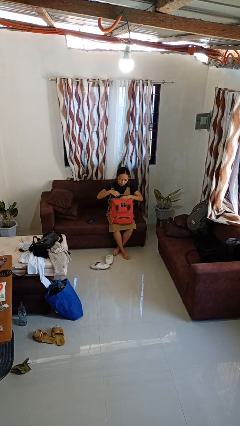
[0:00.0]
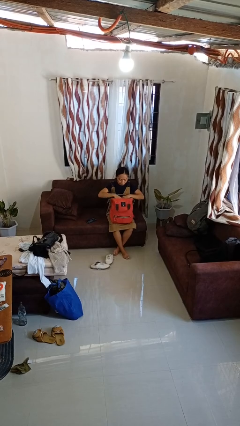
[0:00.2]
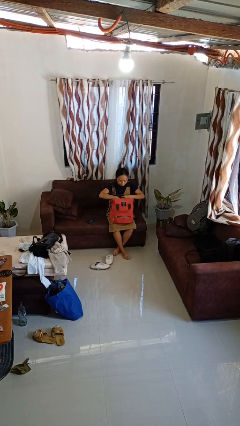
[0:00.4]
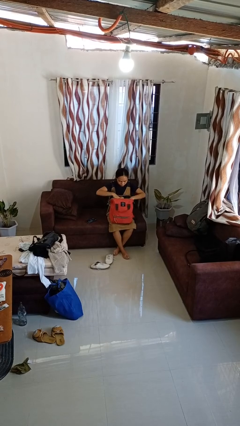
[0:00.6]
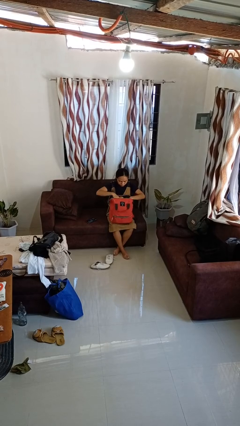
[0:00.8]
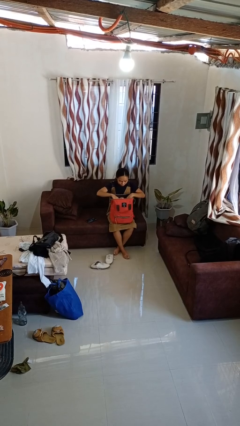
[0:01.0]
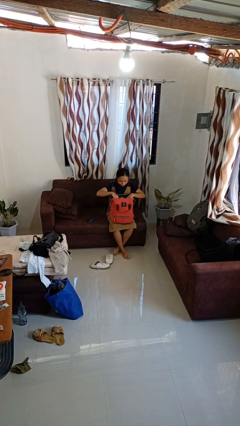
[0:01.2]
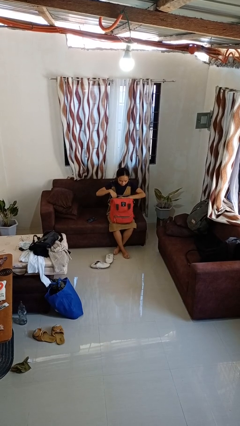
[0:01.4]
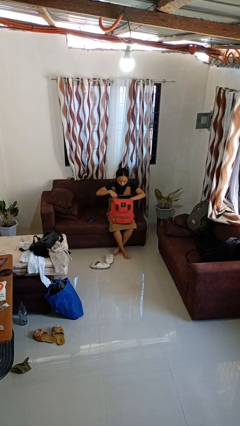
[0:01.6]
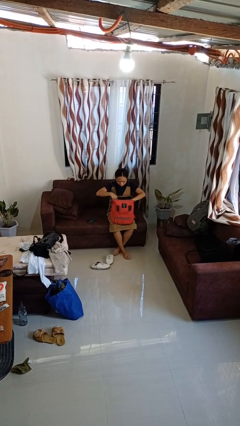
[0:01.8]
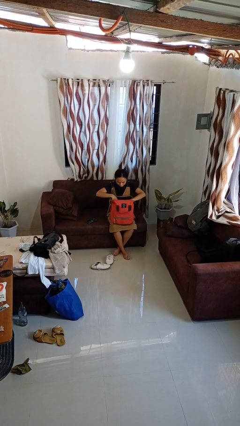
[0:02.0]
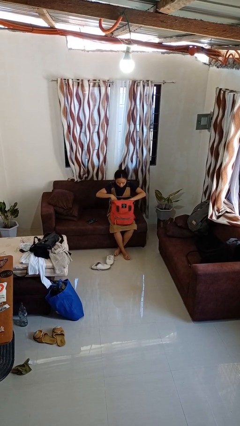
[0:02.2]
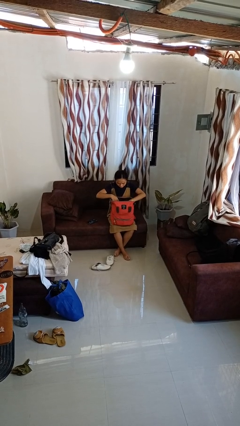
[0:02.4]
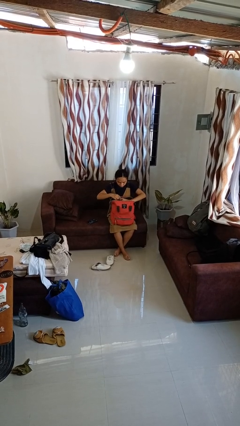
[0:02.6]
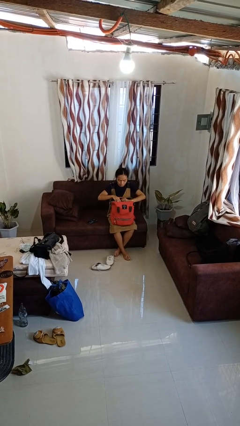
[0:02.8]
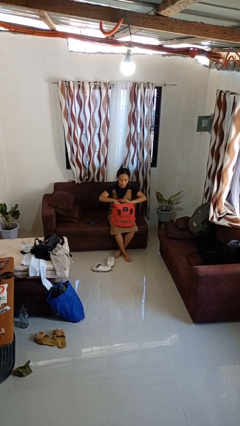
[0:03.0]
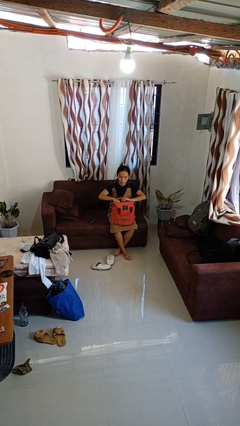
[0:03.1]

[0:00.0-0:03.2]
person searches in backpack

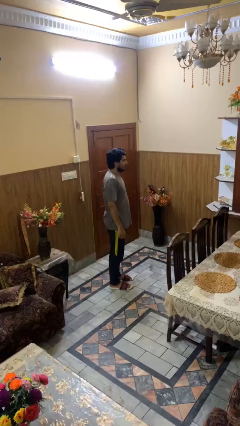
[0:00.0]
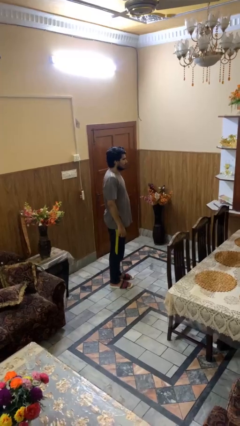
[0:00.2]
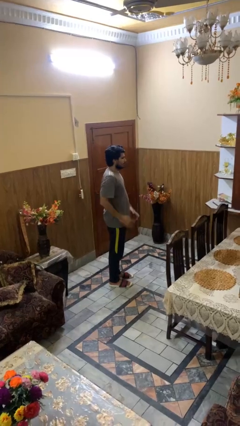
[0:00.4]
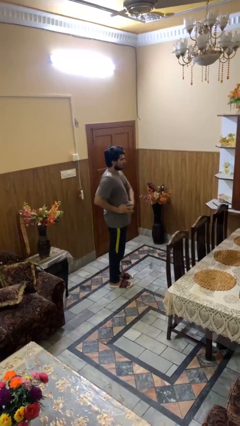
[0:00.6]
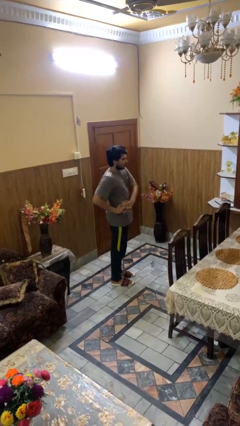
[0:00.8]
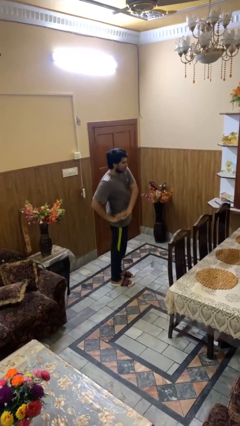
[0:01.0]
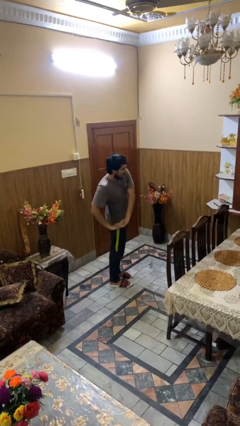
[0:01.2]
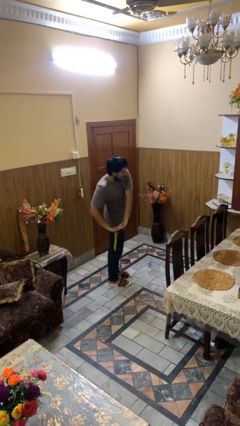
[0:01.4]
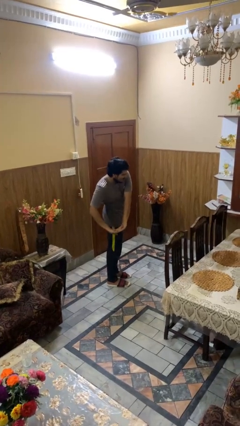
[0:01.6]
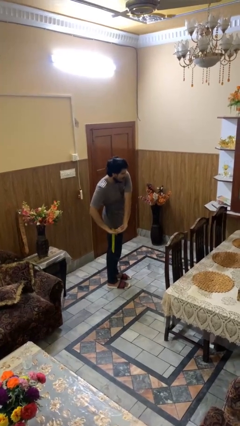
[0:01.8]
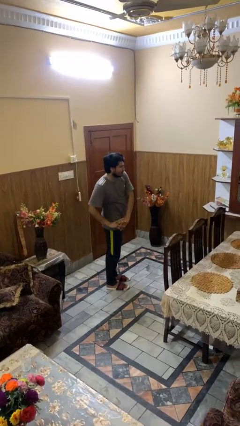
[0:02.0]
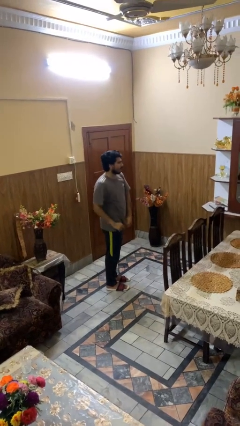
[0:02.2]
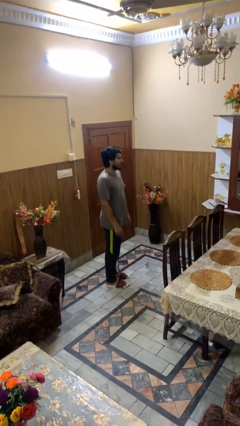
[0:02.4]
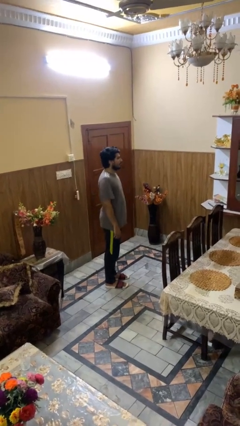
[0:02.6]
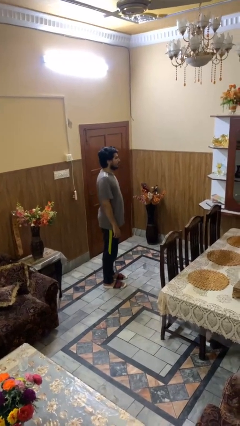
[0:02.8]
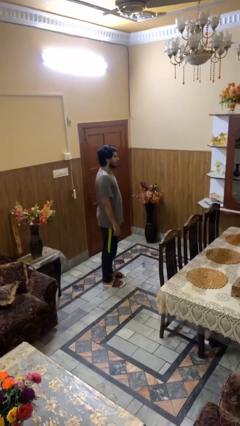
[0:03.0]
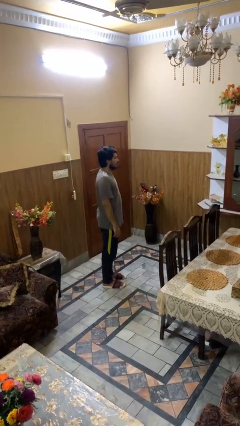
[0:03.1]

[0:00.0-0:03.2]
person stretches arms to side

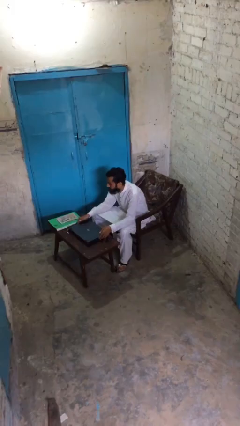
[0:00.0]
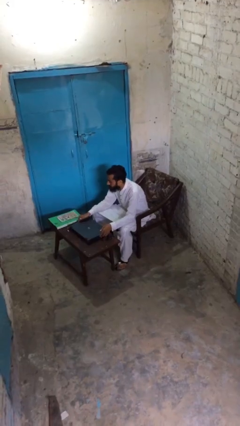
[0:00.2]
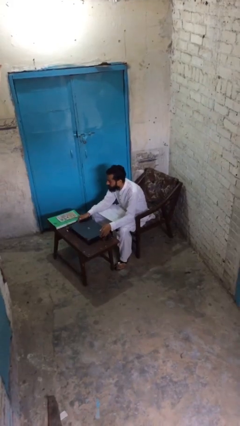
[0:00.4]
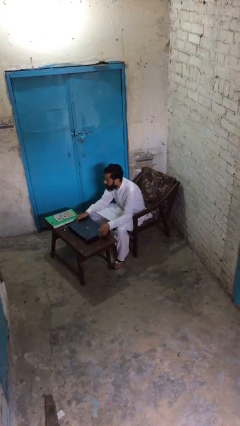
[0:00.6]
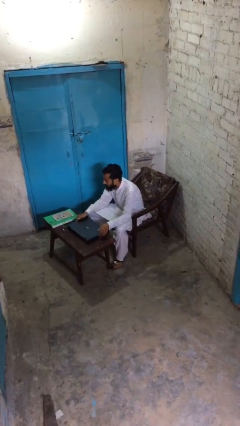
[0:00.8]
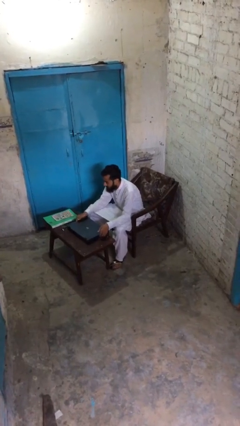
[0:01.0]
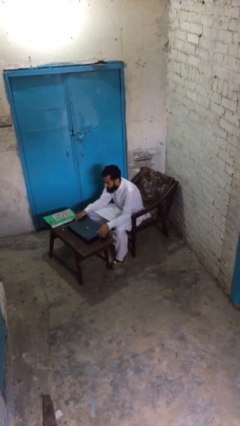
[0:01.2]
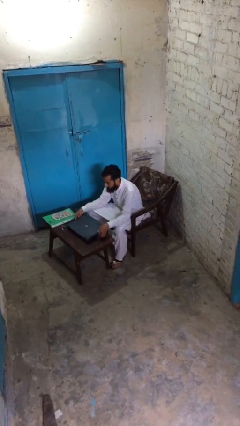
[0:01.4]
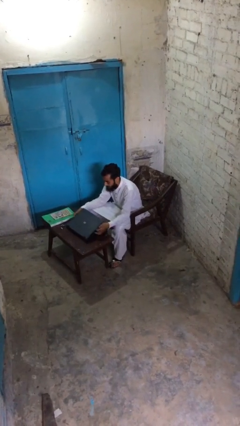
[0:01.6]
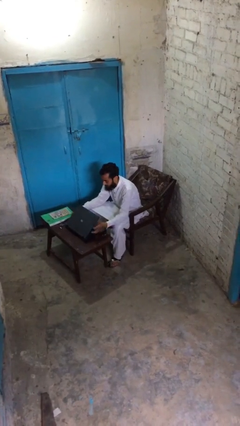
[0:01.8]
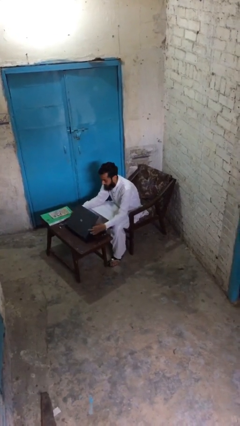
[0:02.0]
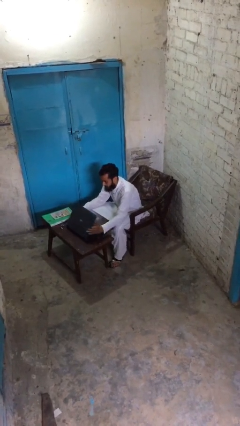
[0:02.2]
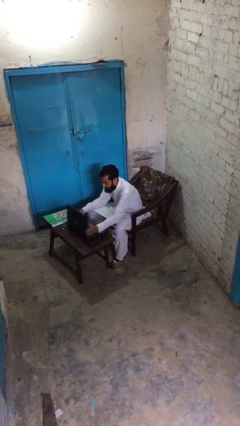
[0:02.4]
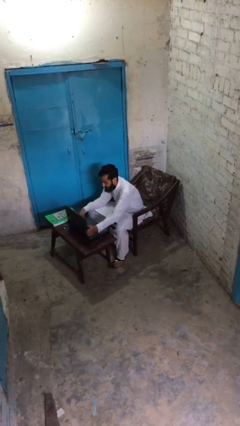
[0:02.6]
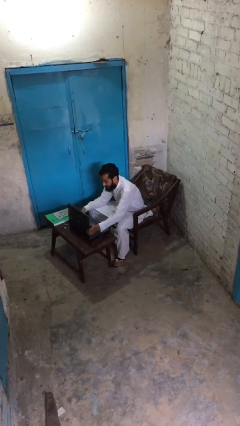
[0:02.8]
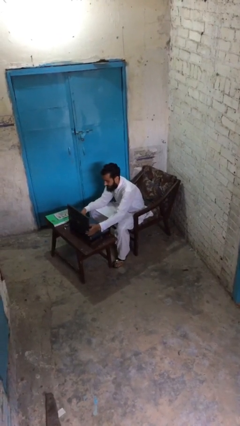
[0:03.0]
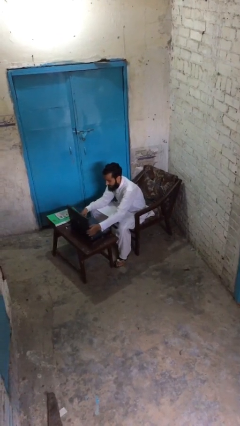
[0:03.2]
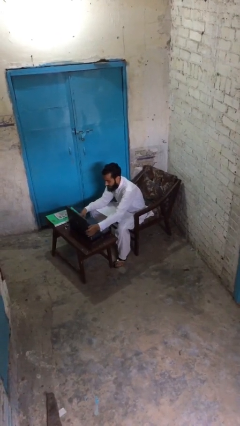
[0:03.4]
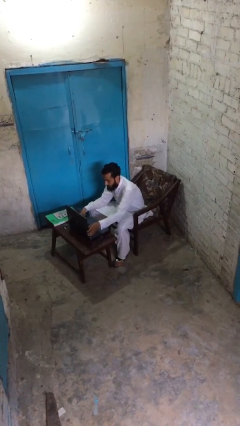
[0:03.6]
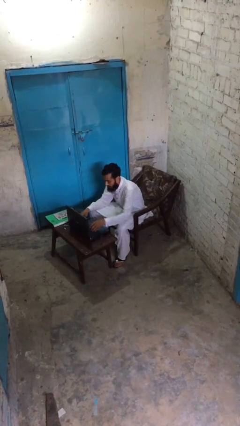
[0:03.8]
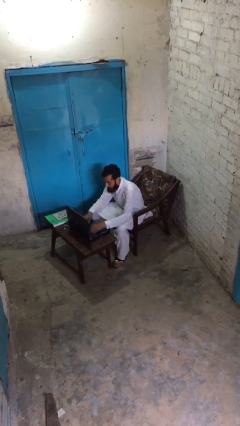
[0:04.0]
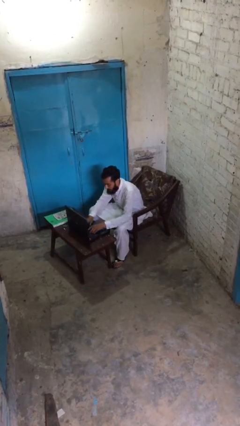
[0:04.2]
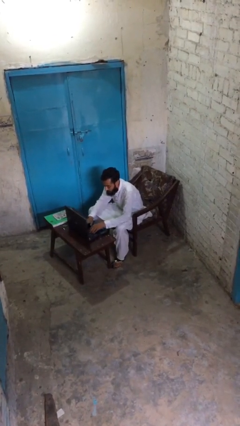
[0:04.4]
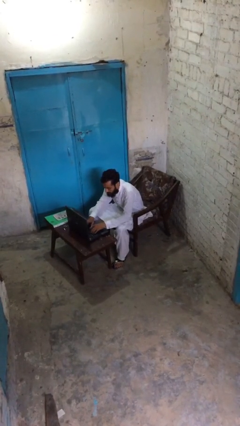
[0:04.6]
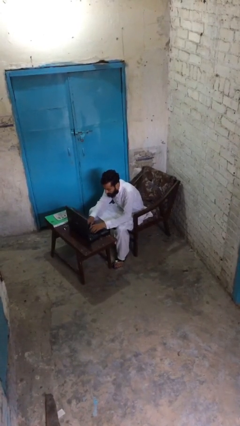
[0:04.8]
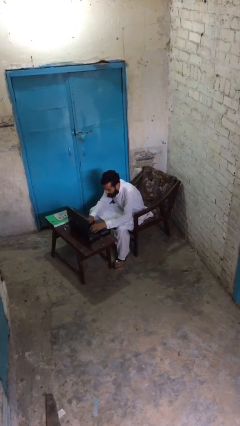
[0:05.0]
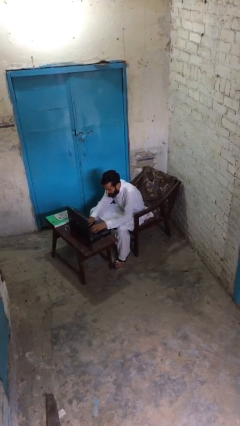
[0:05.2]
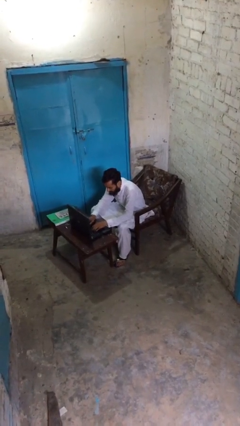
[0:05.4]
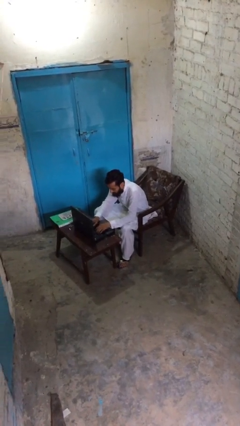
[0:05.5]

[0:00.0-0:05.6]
person interacts with laptop

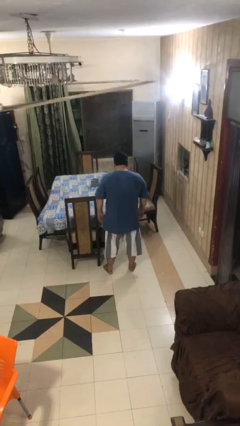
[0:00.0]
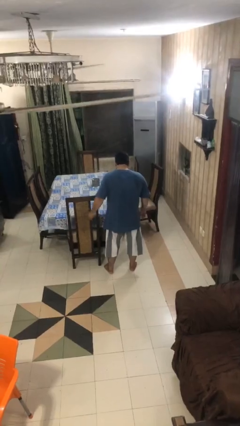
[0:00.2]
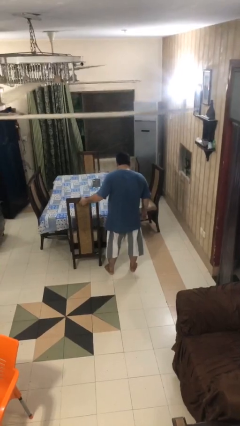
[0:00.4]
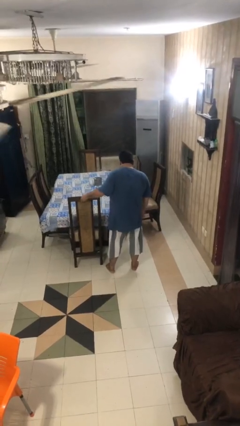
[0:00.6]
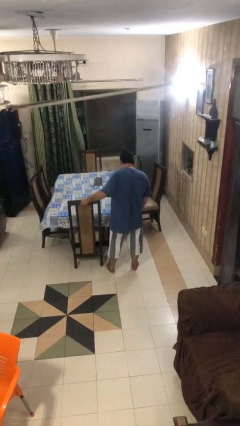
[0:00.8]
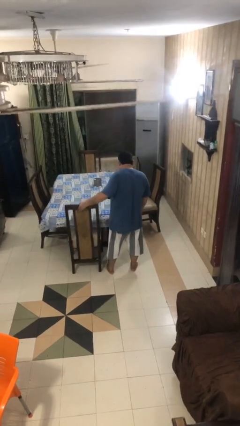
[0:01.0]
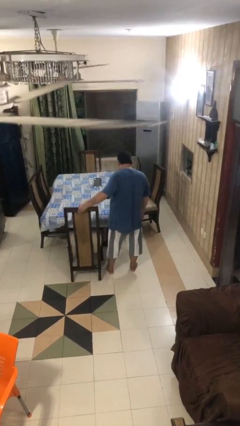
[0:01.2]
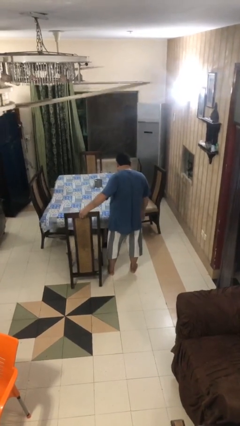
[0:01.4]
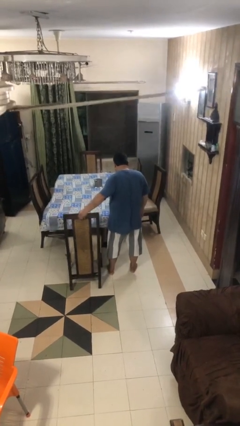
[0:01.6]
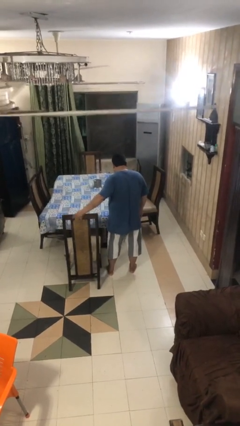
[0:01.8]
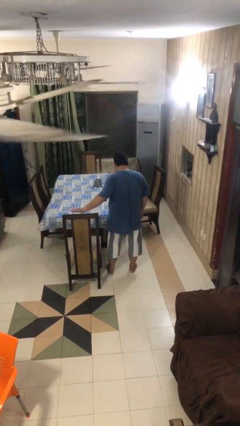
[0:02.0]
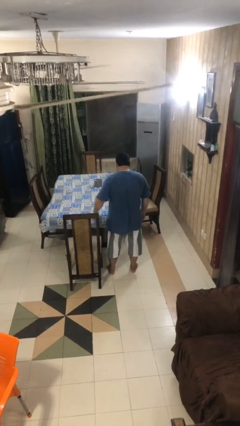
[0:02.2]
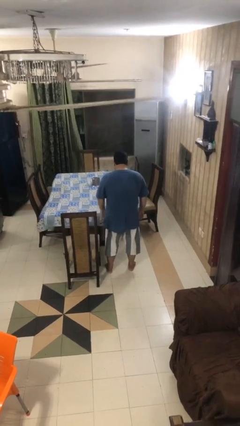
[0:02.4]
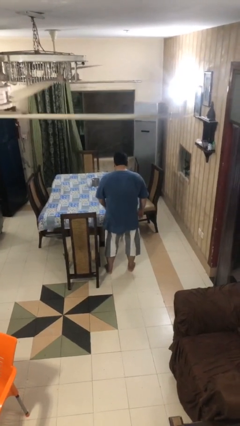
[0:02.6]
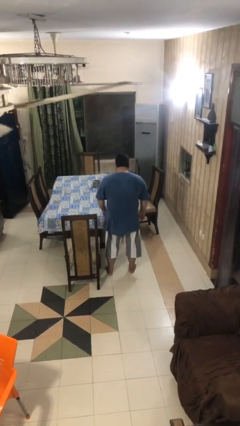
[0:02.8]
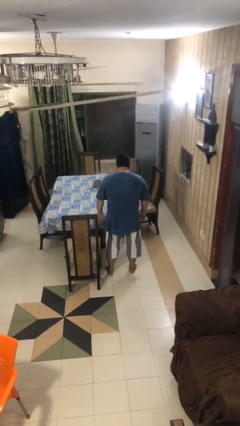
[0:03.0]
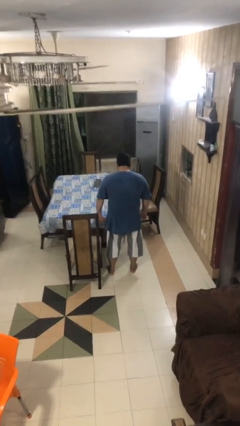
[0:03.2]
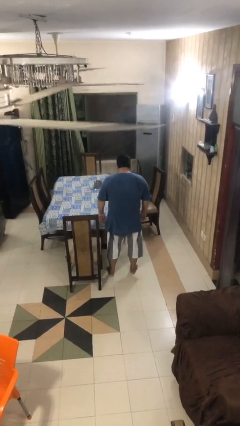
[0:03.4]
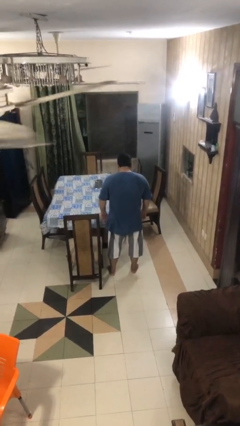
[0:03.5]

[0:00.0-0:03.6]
person pulls out chair

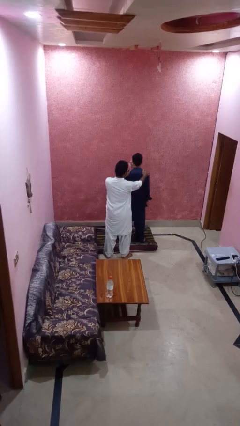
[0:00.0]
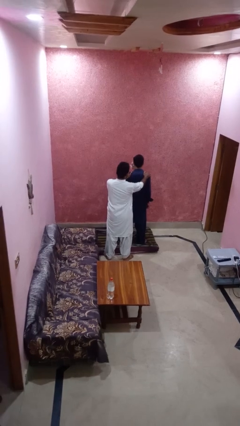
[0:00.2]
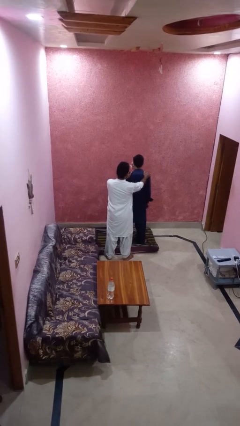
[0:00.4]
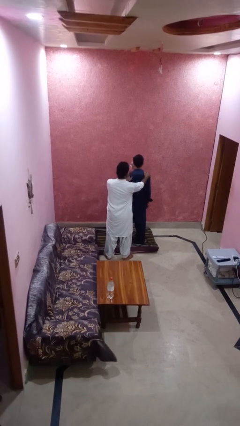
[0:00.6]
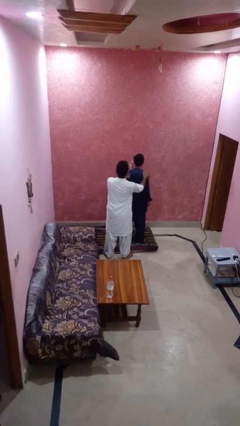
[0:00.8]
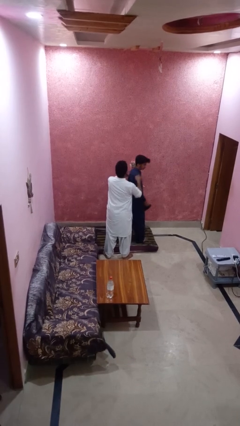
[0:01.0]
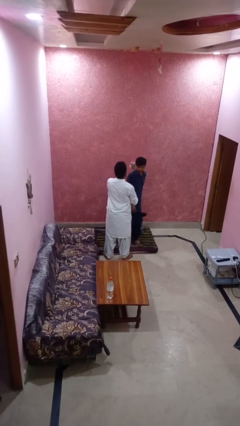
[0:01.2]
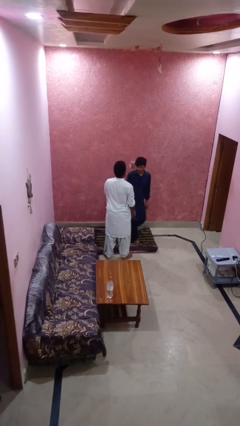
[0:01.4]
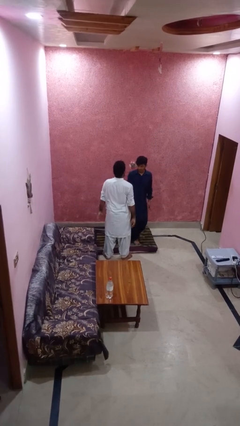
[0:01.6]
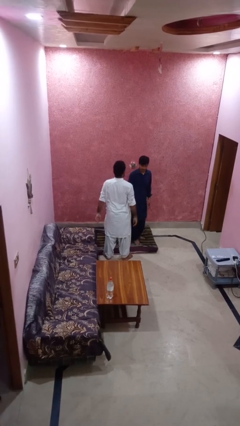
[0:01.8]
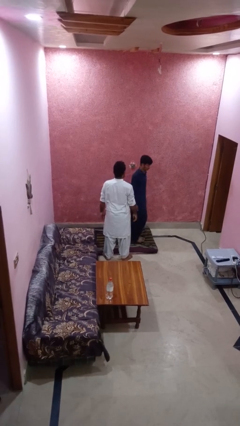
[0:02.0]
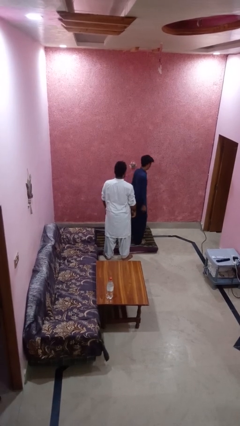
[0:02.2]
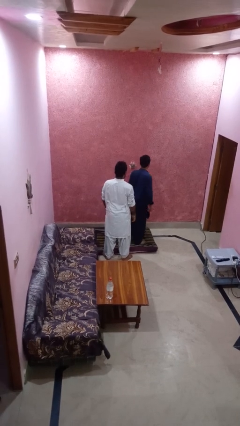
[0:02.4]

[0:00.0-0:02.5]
person spins person around
